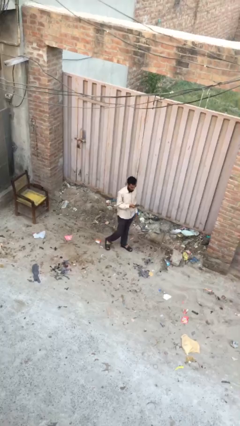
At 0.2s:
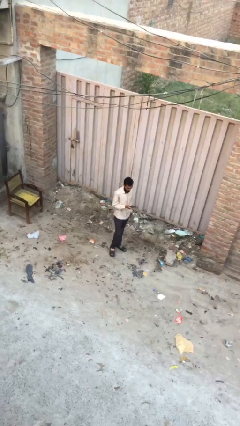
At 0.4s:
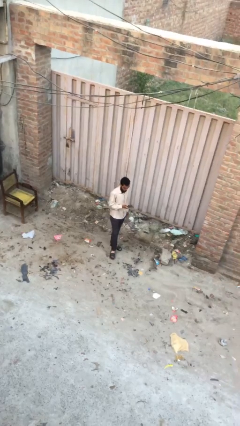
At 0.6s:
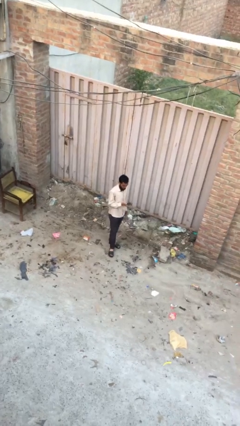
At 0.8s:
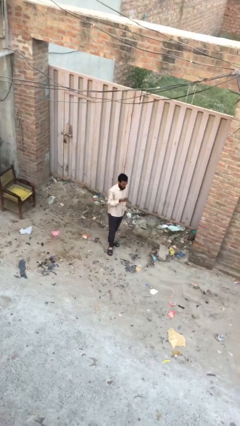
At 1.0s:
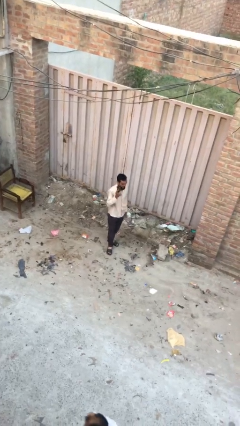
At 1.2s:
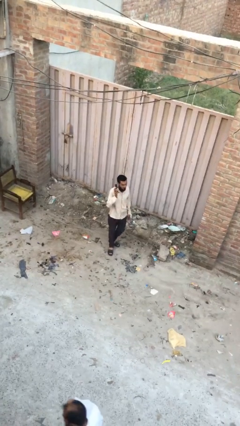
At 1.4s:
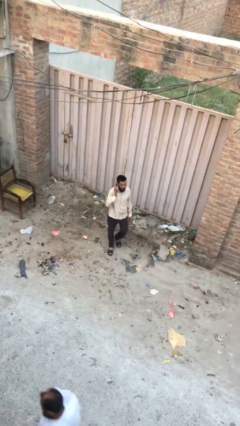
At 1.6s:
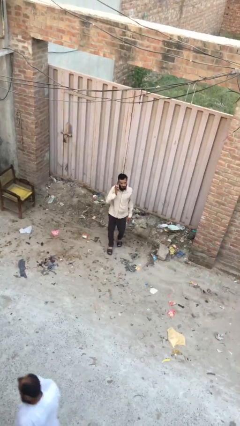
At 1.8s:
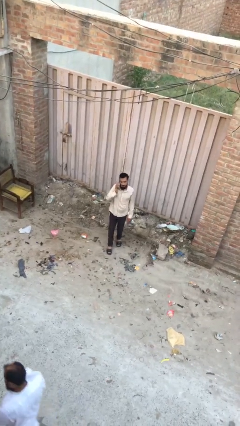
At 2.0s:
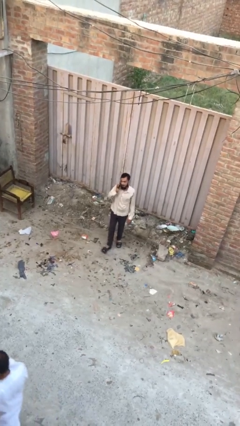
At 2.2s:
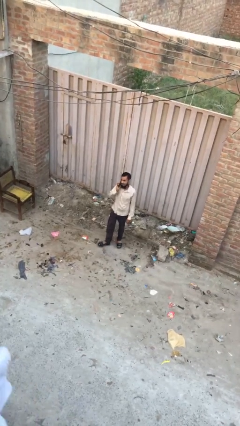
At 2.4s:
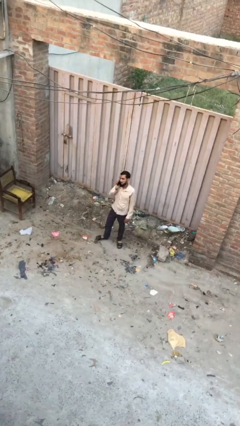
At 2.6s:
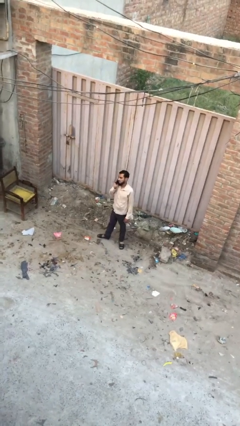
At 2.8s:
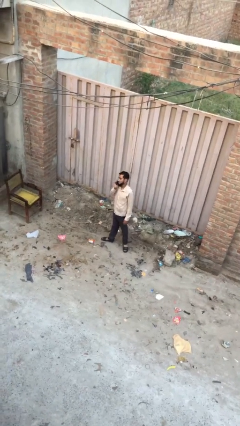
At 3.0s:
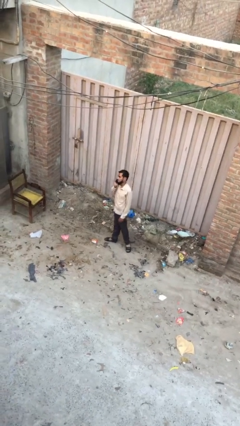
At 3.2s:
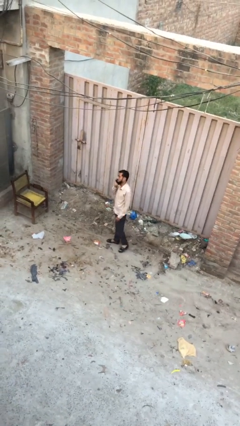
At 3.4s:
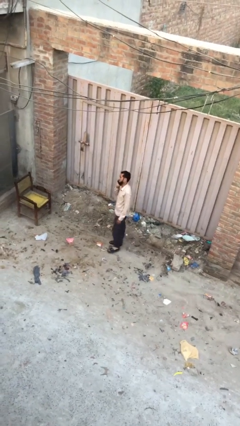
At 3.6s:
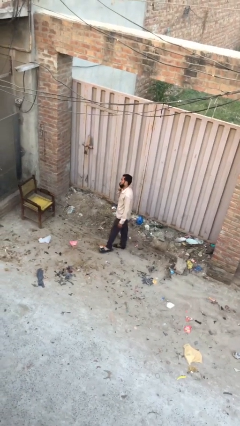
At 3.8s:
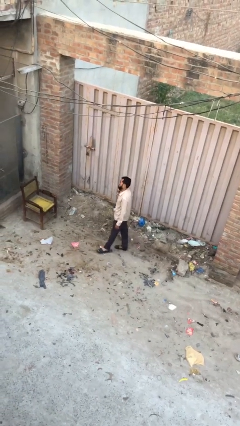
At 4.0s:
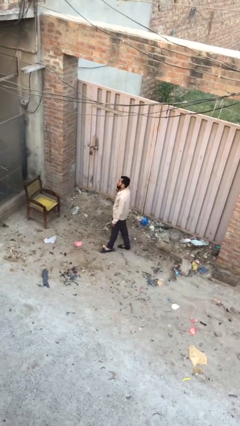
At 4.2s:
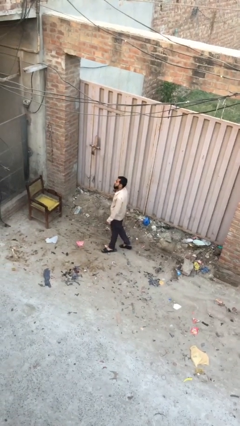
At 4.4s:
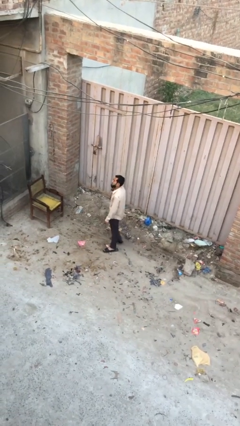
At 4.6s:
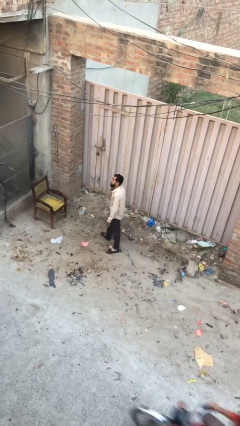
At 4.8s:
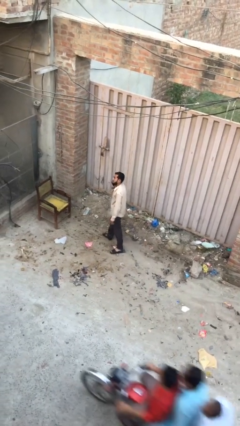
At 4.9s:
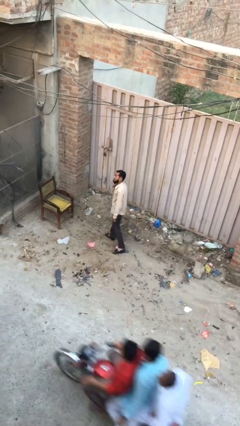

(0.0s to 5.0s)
person talks on phone

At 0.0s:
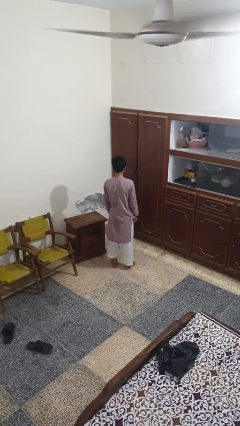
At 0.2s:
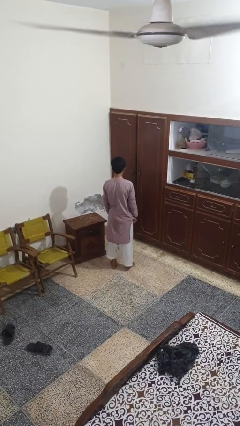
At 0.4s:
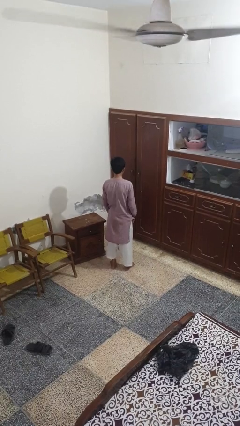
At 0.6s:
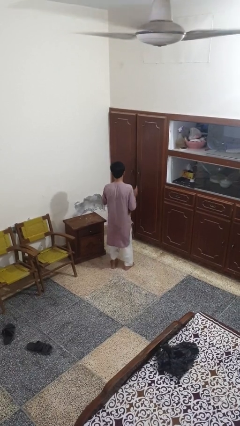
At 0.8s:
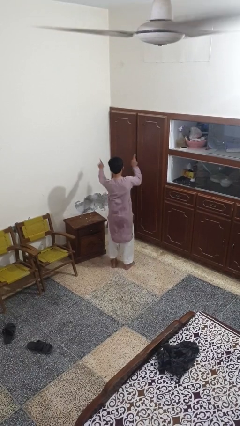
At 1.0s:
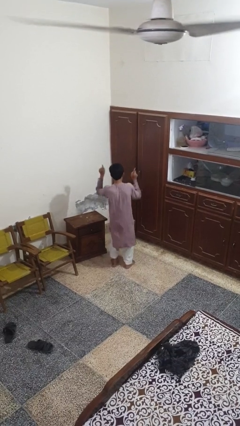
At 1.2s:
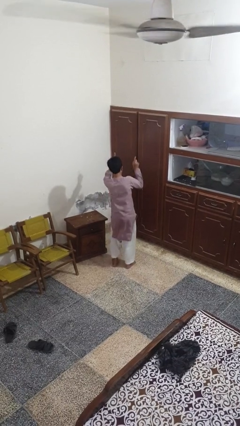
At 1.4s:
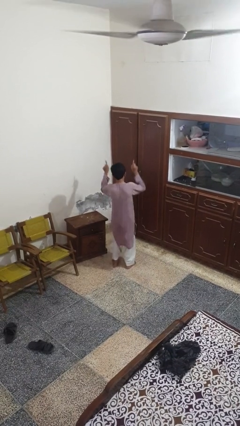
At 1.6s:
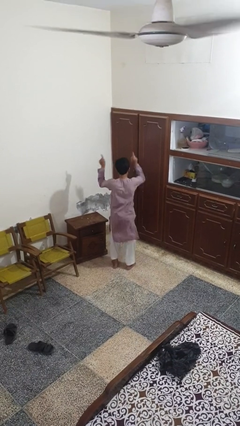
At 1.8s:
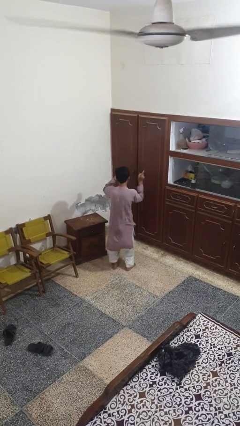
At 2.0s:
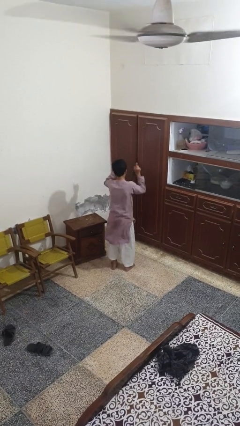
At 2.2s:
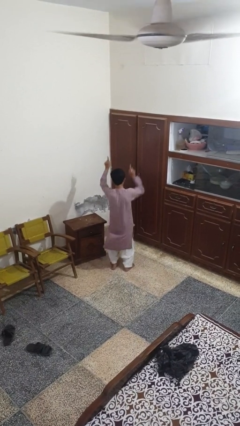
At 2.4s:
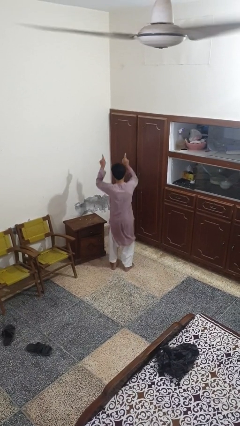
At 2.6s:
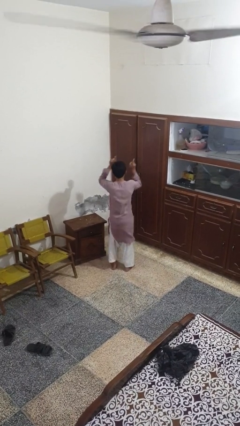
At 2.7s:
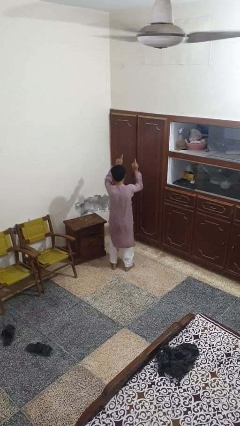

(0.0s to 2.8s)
person dances in place

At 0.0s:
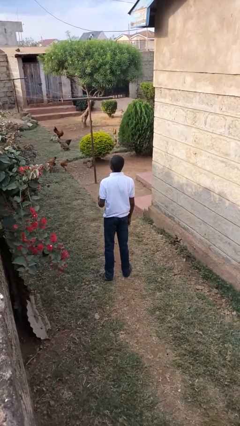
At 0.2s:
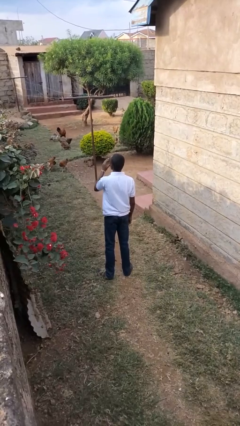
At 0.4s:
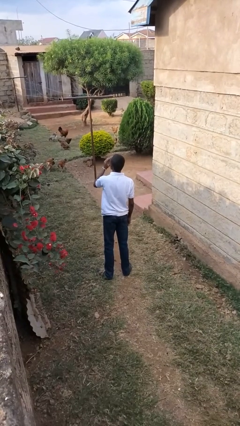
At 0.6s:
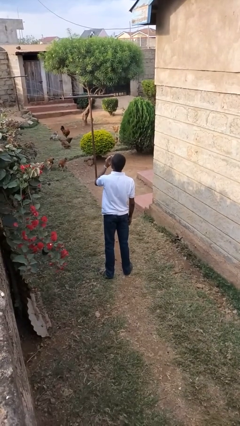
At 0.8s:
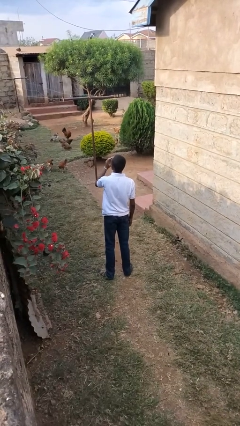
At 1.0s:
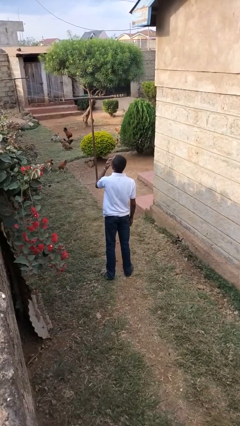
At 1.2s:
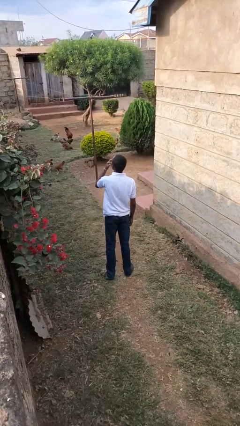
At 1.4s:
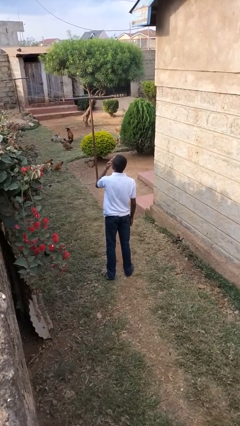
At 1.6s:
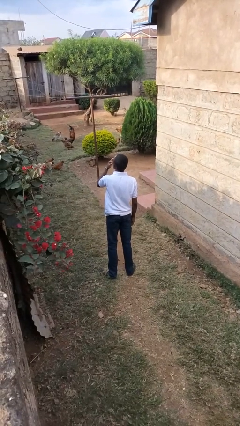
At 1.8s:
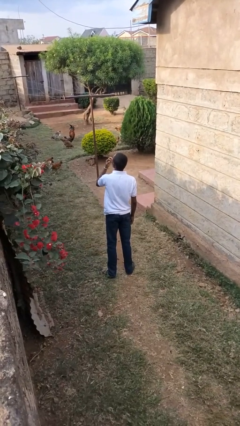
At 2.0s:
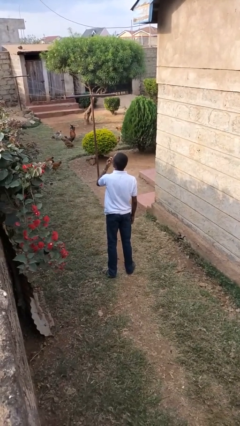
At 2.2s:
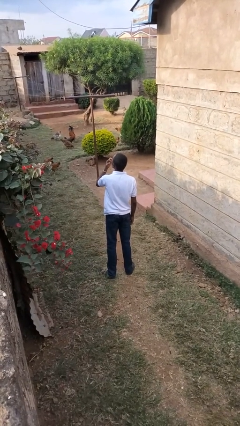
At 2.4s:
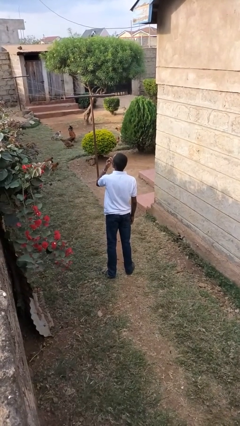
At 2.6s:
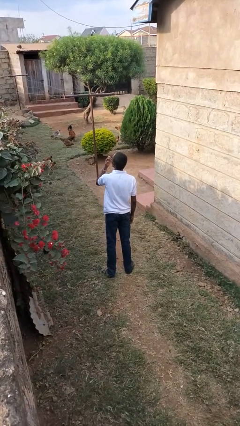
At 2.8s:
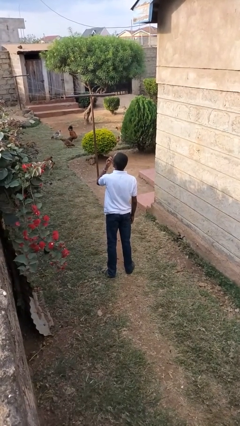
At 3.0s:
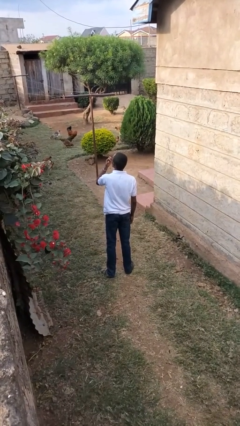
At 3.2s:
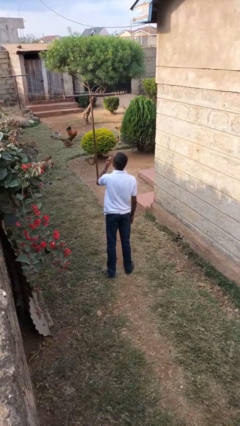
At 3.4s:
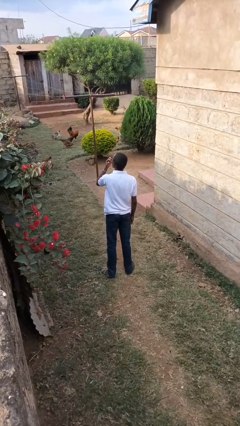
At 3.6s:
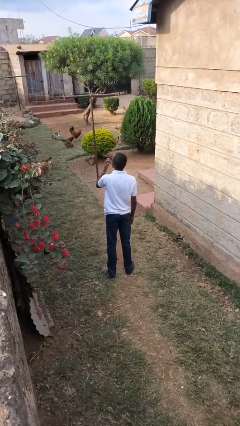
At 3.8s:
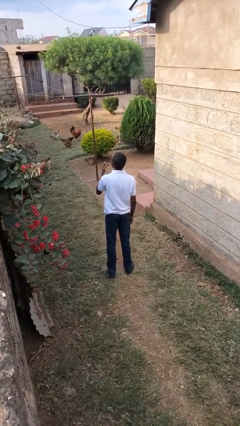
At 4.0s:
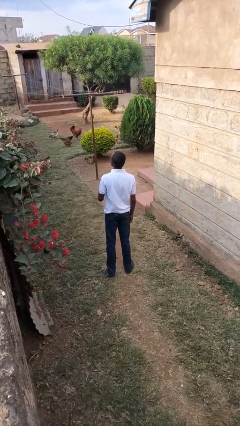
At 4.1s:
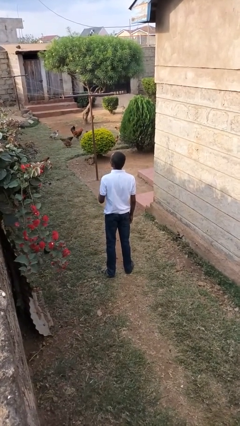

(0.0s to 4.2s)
person licks fingers

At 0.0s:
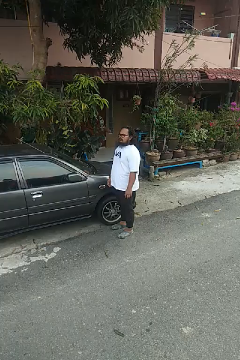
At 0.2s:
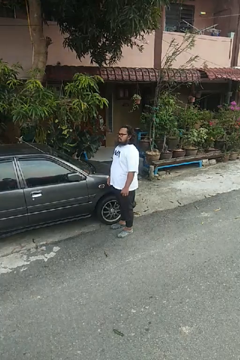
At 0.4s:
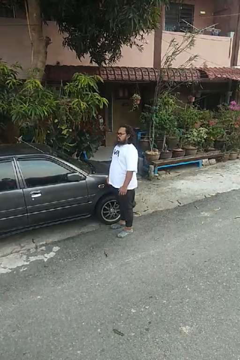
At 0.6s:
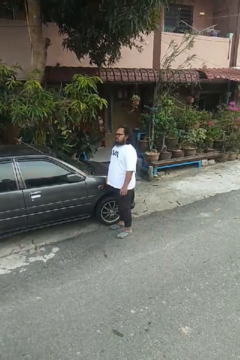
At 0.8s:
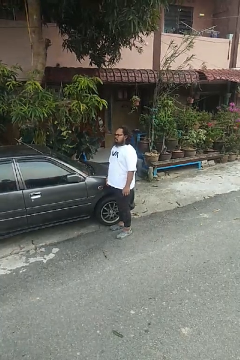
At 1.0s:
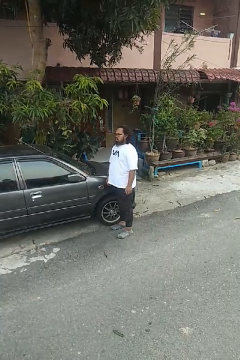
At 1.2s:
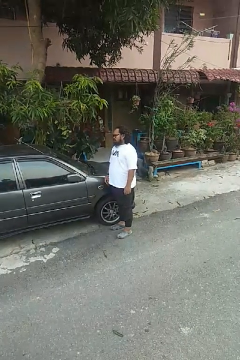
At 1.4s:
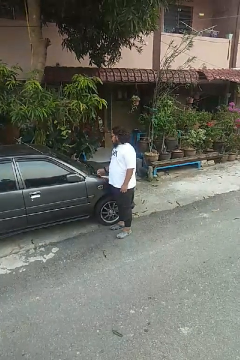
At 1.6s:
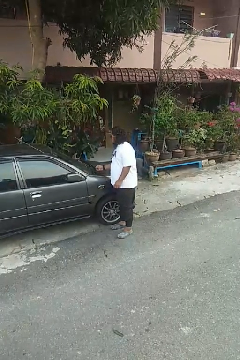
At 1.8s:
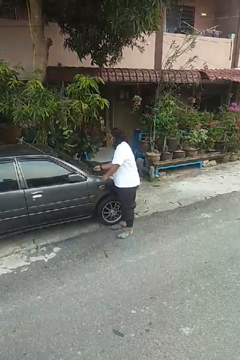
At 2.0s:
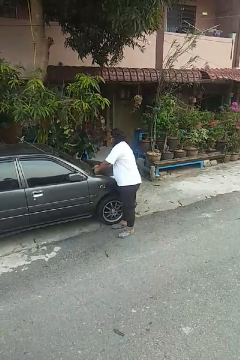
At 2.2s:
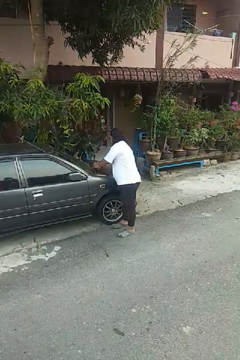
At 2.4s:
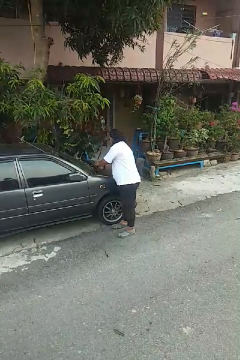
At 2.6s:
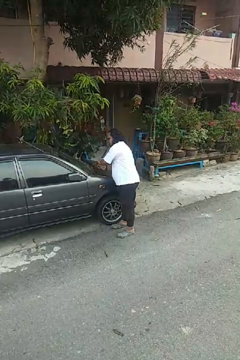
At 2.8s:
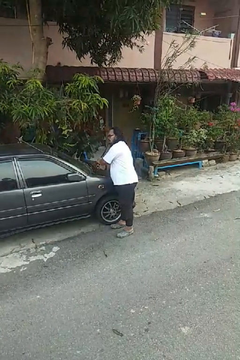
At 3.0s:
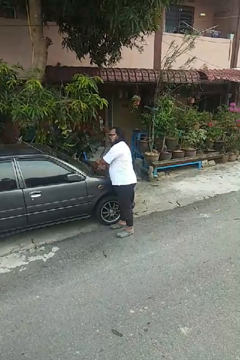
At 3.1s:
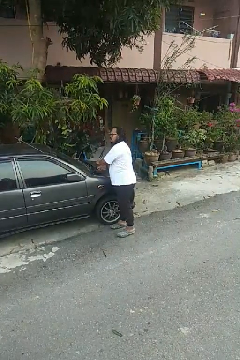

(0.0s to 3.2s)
person flips up car wipers

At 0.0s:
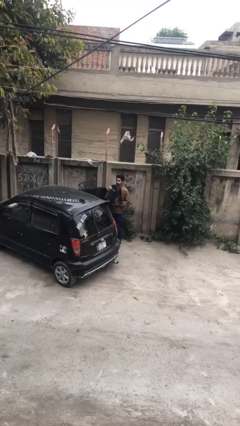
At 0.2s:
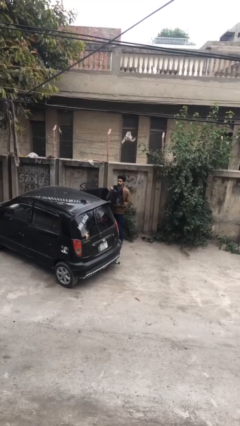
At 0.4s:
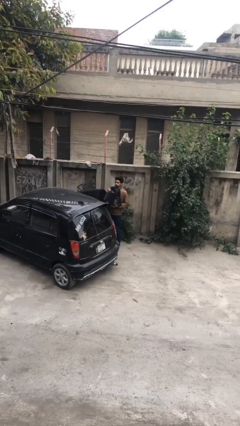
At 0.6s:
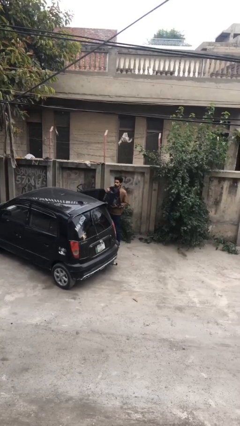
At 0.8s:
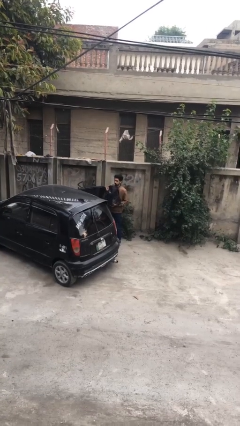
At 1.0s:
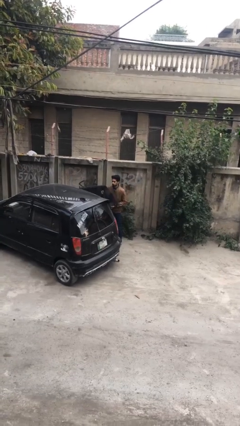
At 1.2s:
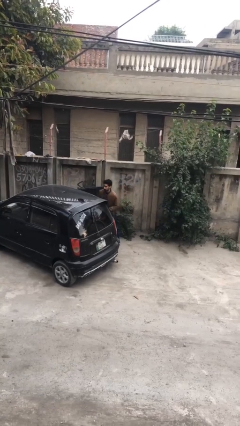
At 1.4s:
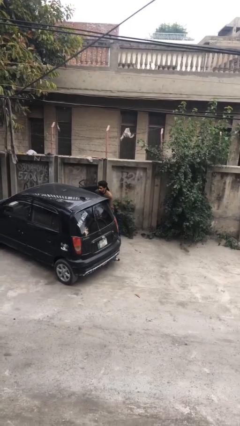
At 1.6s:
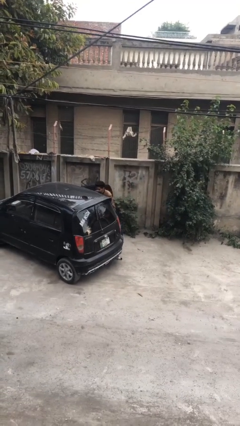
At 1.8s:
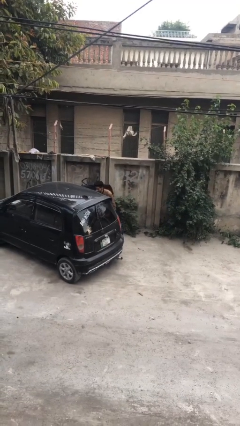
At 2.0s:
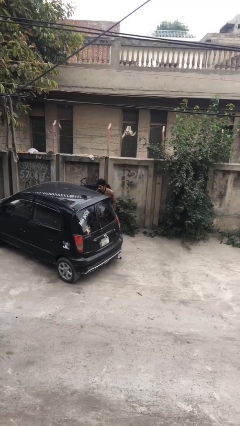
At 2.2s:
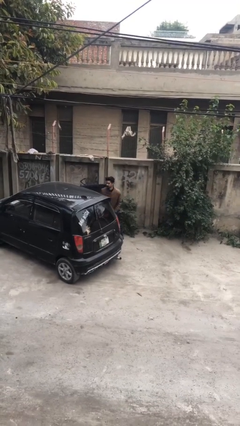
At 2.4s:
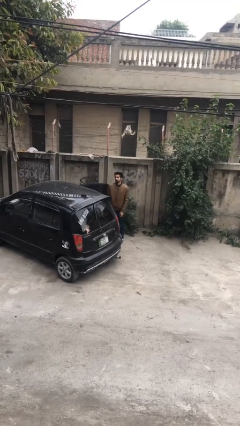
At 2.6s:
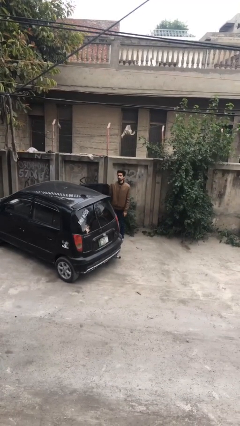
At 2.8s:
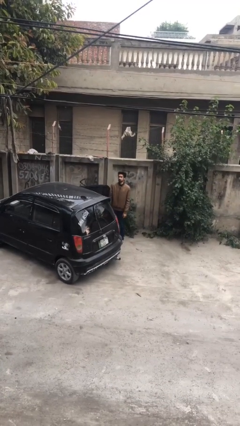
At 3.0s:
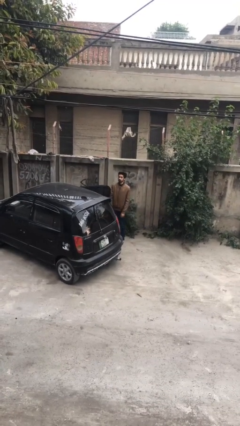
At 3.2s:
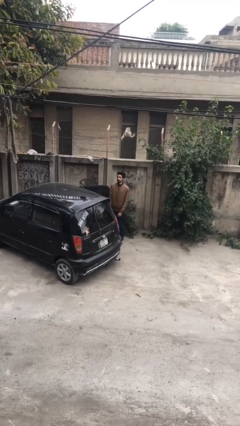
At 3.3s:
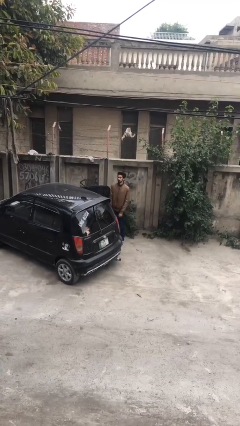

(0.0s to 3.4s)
person loads car
